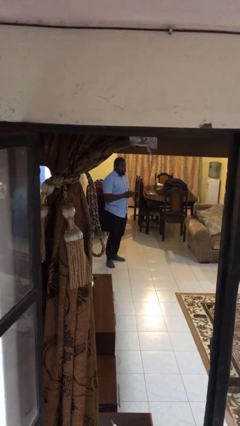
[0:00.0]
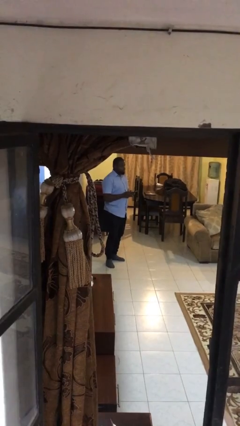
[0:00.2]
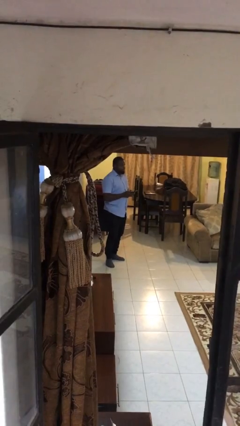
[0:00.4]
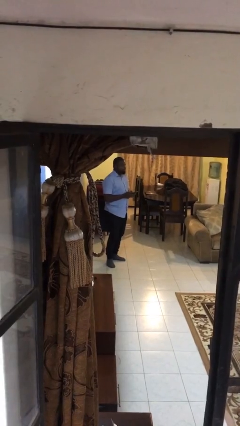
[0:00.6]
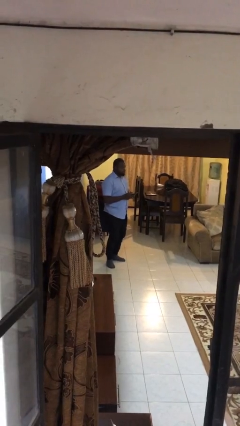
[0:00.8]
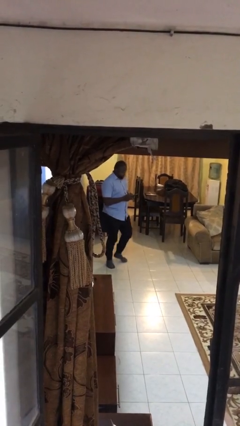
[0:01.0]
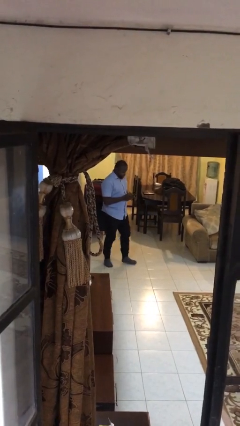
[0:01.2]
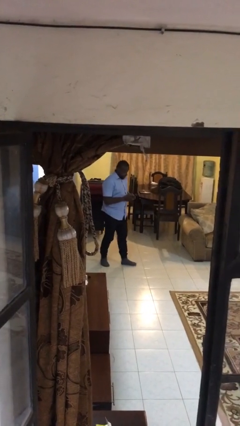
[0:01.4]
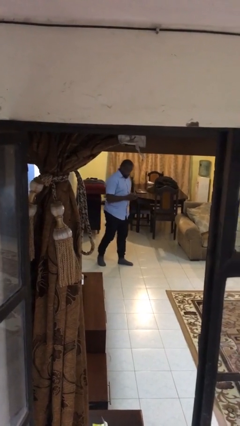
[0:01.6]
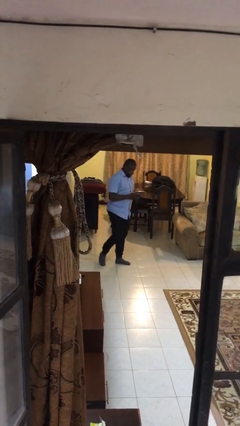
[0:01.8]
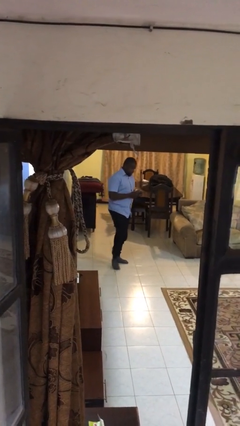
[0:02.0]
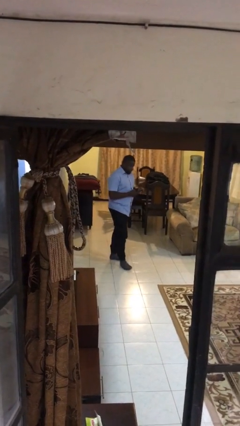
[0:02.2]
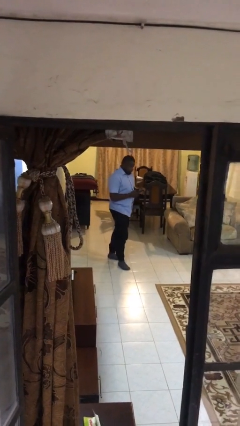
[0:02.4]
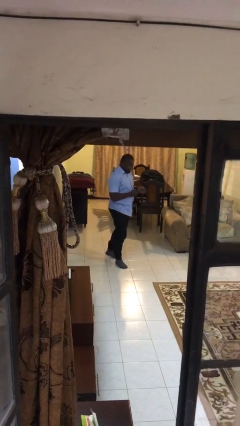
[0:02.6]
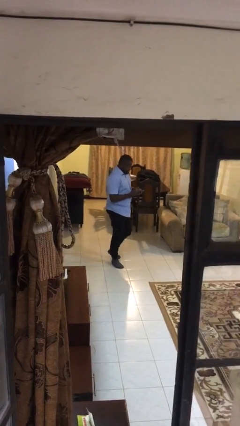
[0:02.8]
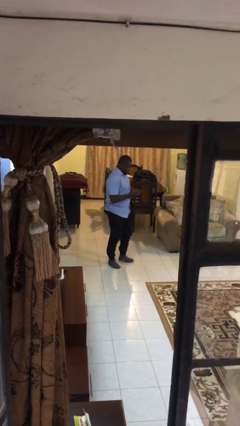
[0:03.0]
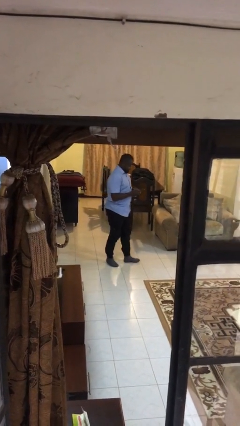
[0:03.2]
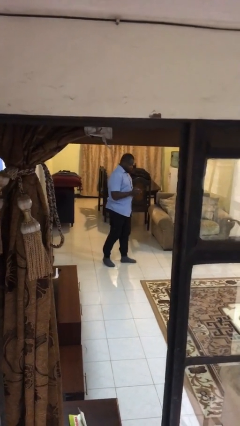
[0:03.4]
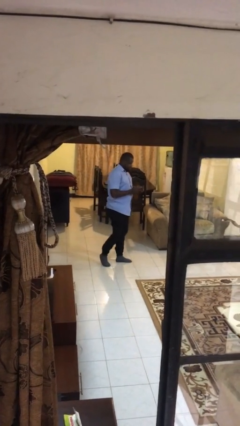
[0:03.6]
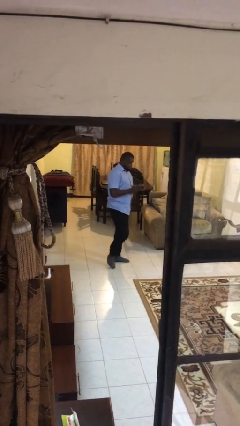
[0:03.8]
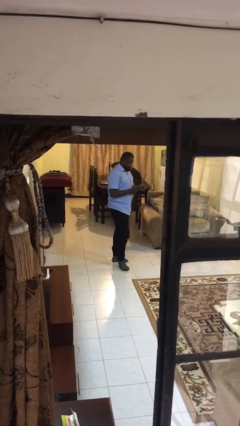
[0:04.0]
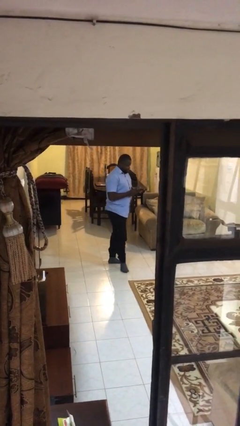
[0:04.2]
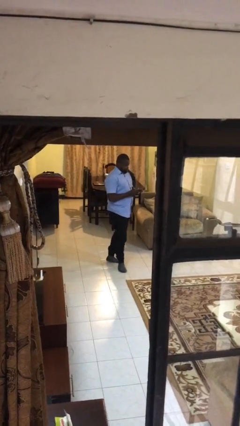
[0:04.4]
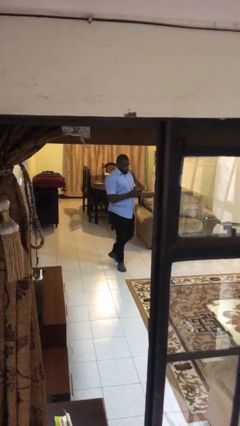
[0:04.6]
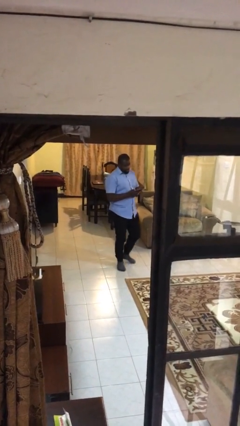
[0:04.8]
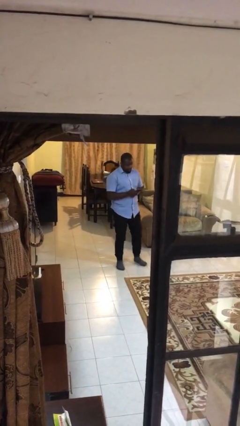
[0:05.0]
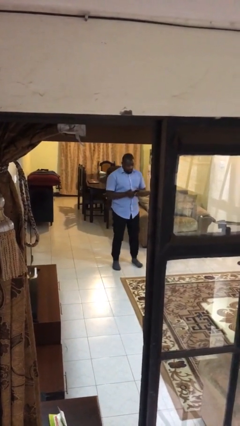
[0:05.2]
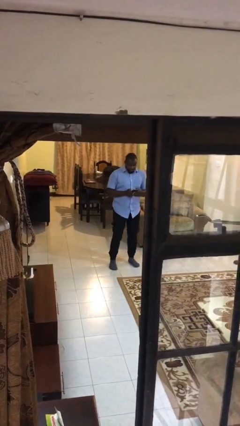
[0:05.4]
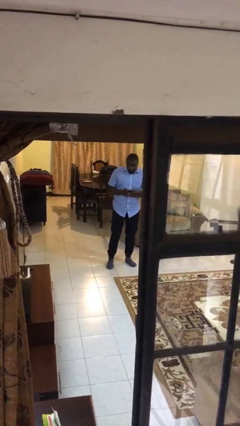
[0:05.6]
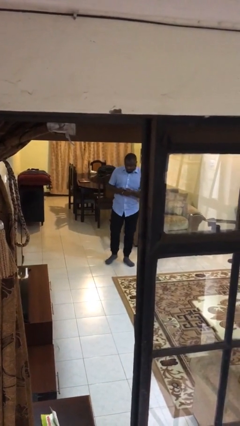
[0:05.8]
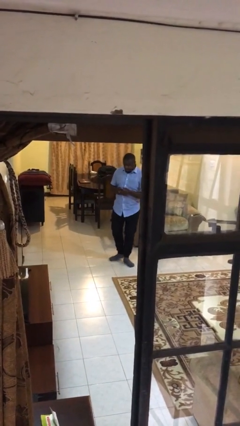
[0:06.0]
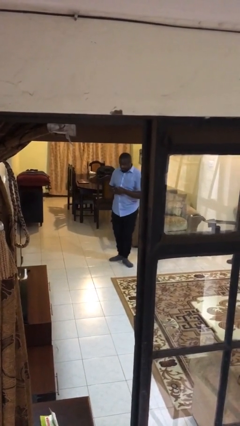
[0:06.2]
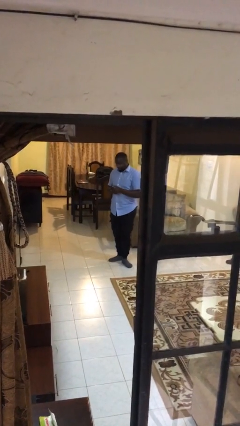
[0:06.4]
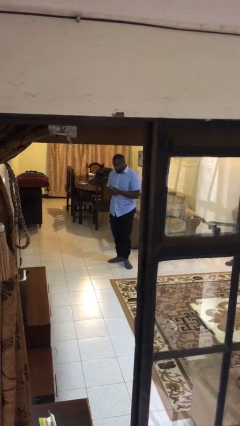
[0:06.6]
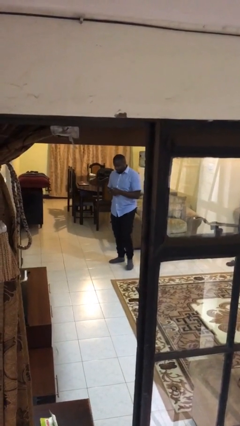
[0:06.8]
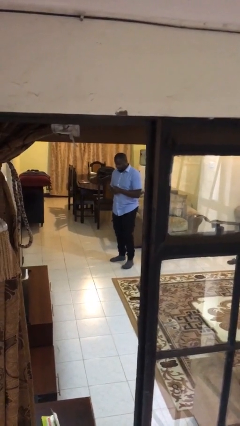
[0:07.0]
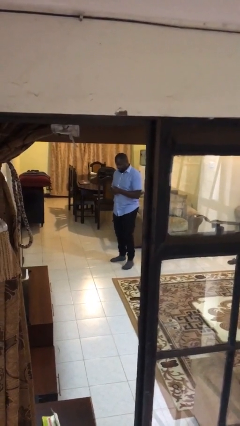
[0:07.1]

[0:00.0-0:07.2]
person texts on phone

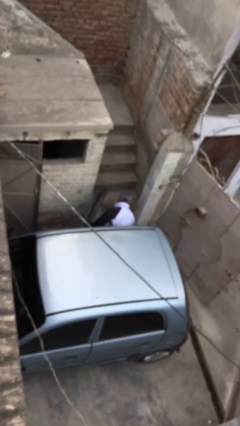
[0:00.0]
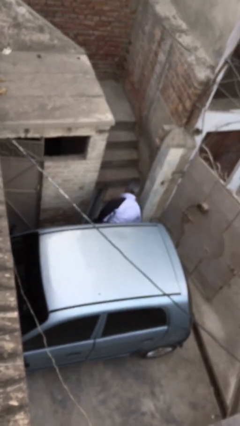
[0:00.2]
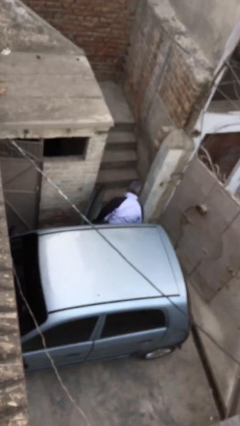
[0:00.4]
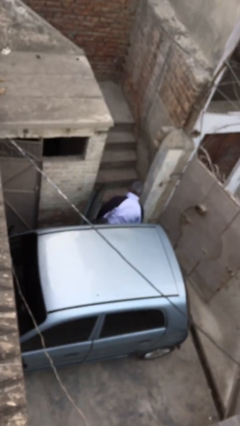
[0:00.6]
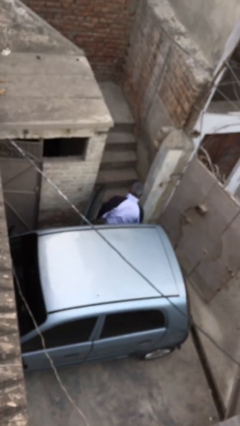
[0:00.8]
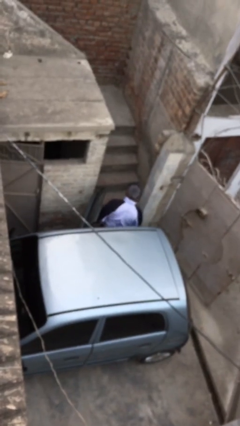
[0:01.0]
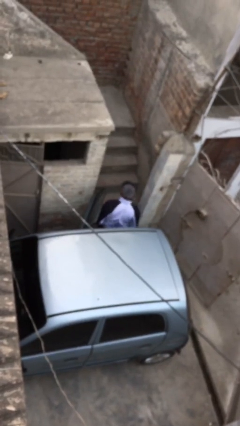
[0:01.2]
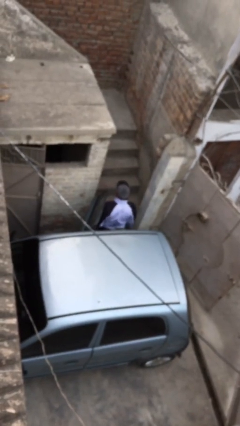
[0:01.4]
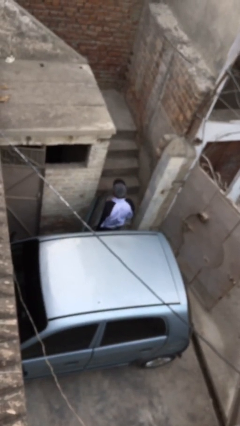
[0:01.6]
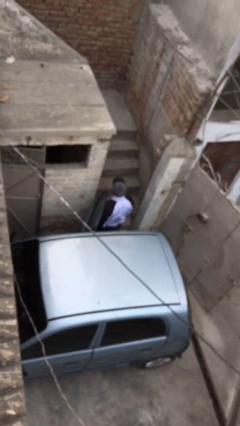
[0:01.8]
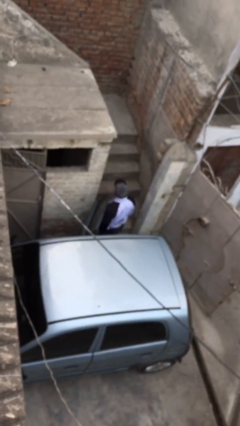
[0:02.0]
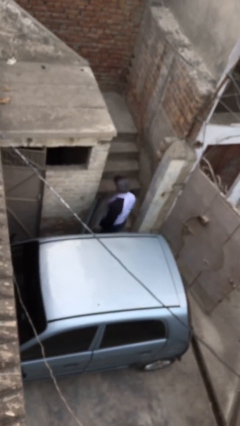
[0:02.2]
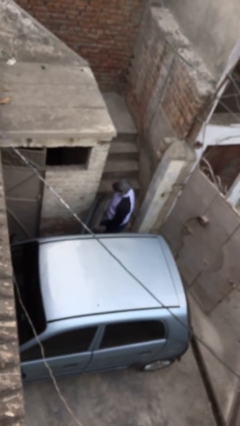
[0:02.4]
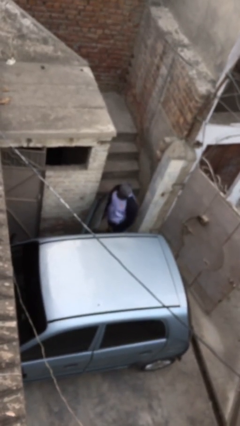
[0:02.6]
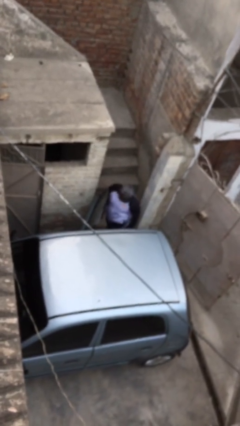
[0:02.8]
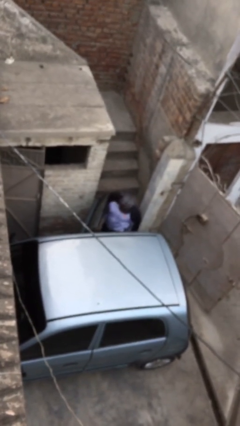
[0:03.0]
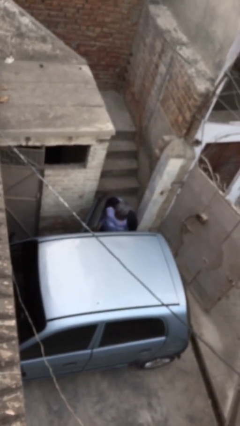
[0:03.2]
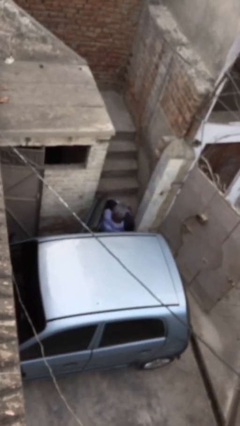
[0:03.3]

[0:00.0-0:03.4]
person exits car

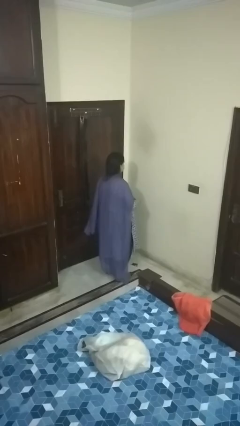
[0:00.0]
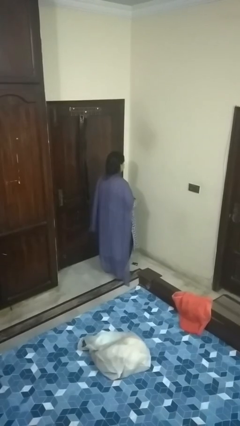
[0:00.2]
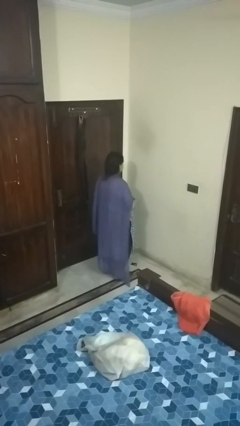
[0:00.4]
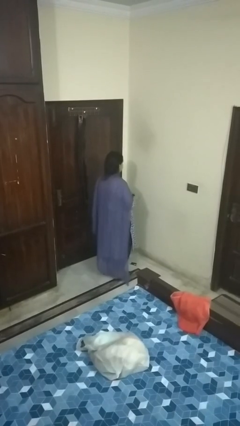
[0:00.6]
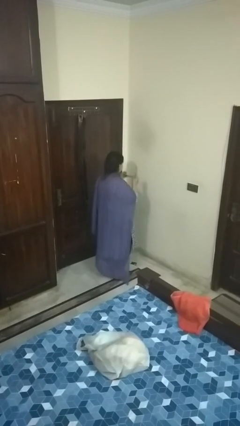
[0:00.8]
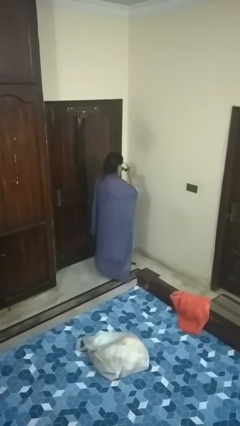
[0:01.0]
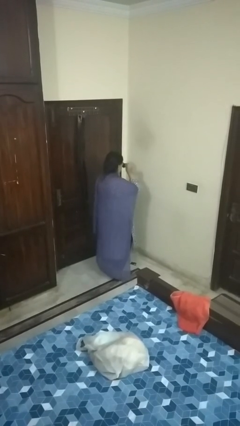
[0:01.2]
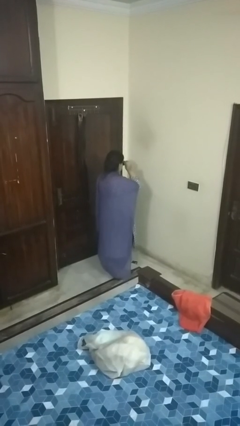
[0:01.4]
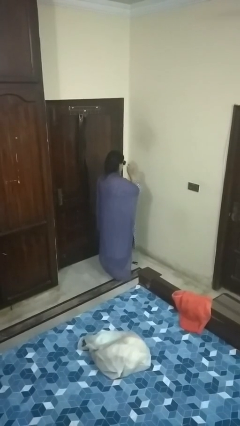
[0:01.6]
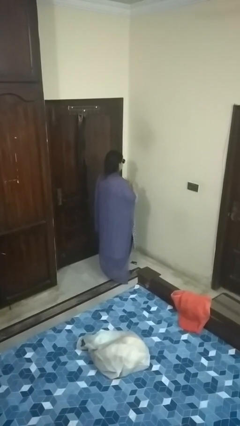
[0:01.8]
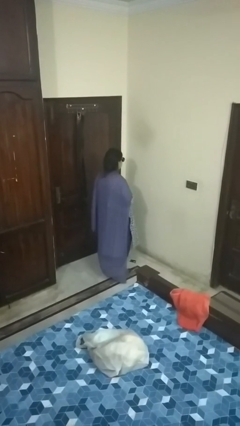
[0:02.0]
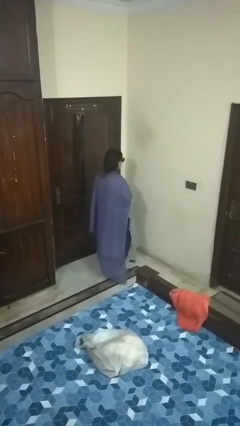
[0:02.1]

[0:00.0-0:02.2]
person puts on sunglasses

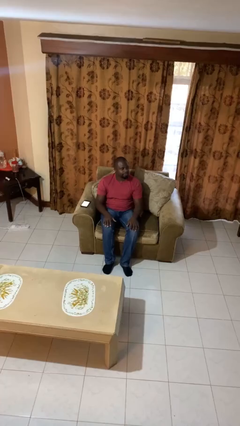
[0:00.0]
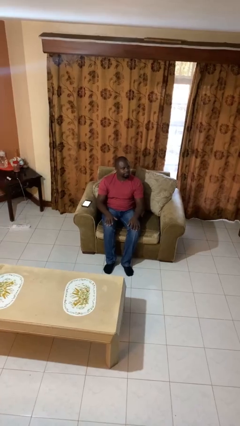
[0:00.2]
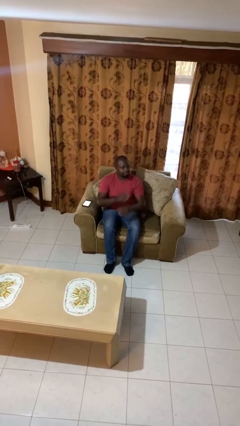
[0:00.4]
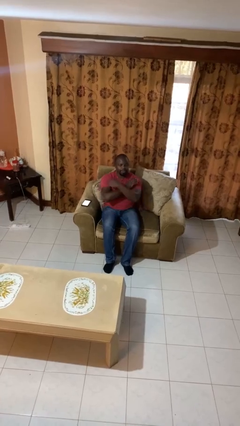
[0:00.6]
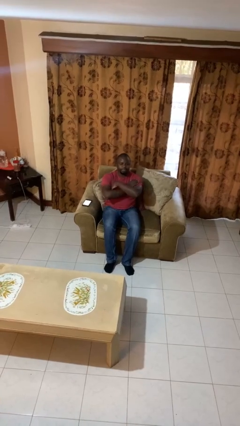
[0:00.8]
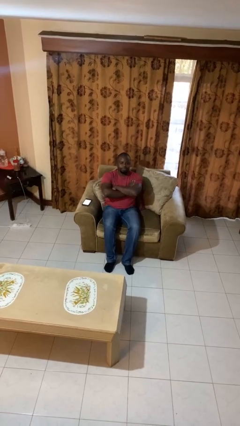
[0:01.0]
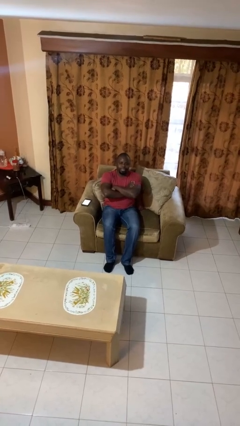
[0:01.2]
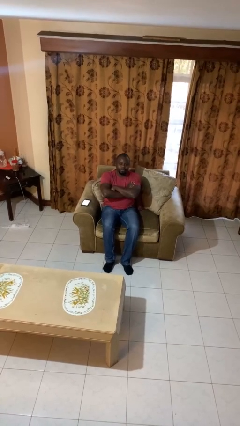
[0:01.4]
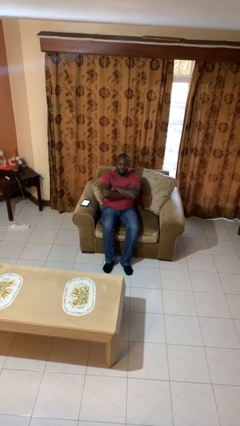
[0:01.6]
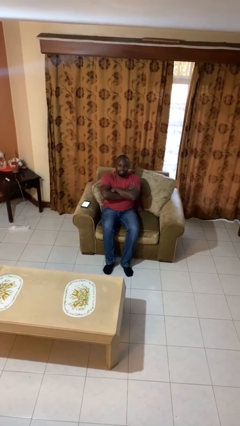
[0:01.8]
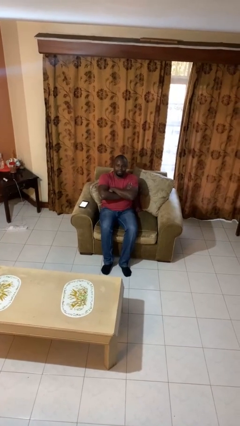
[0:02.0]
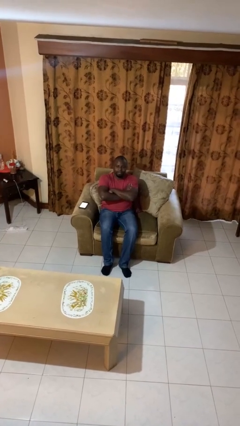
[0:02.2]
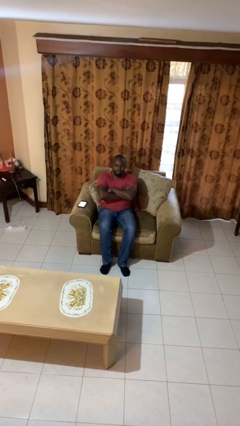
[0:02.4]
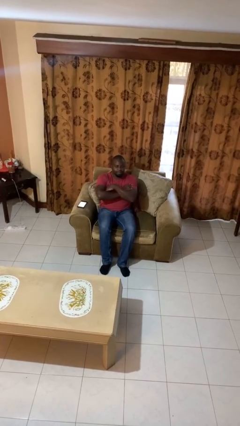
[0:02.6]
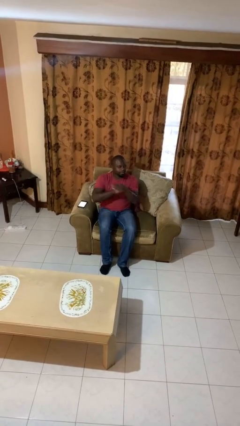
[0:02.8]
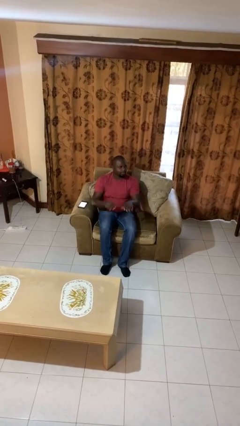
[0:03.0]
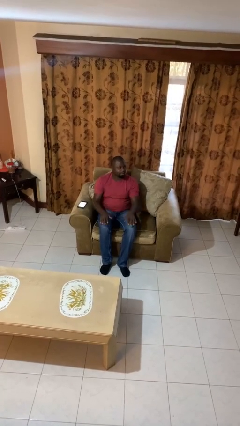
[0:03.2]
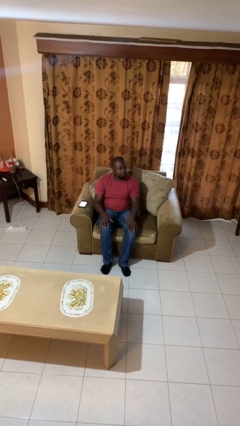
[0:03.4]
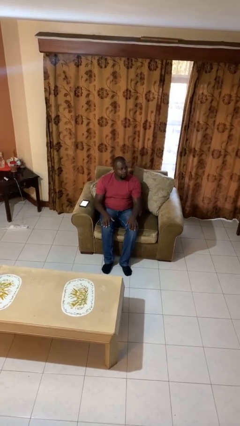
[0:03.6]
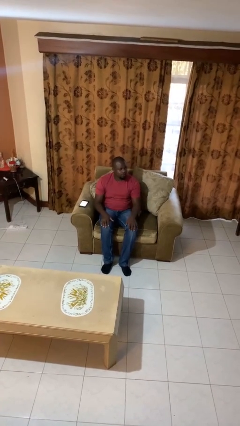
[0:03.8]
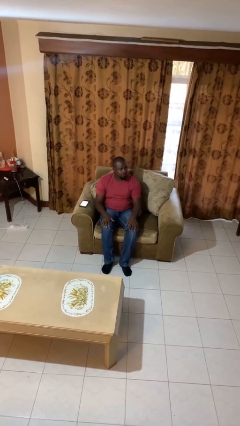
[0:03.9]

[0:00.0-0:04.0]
person crosses arms

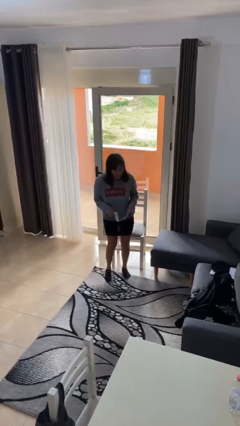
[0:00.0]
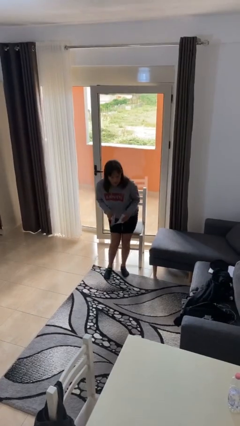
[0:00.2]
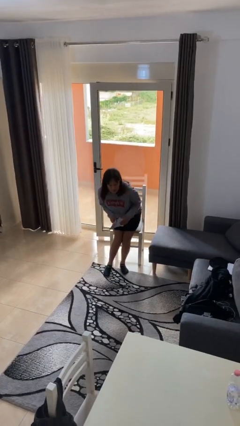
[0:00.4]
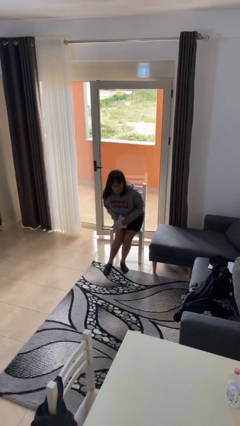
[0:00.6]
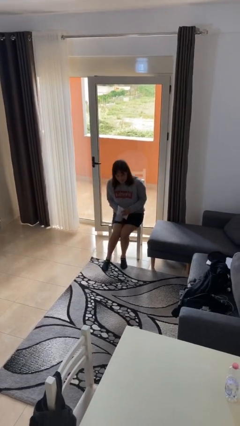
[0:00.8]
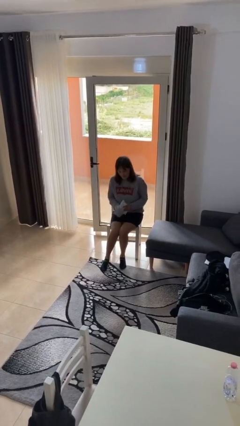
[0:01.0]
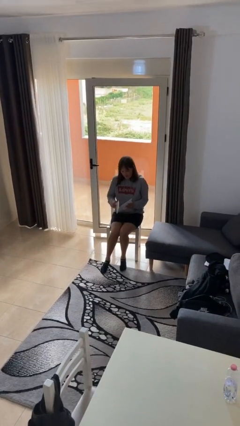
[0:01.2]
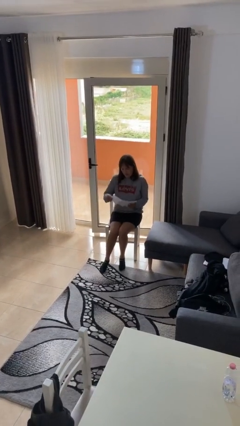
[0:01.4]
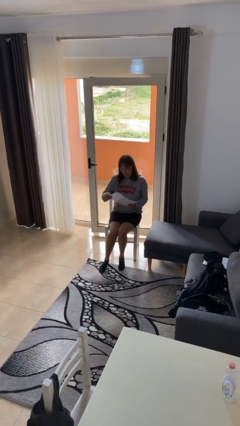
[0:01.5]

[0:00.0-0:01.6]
person sits down
